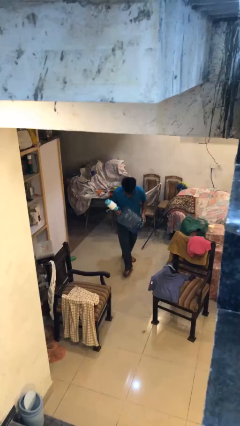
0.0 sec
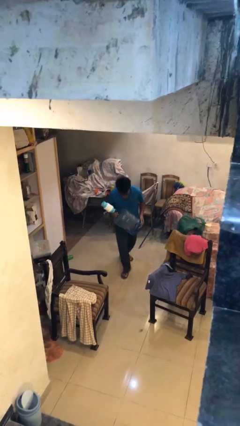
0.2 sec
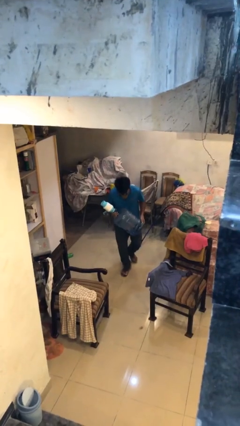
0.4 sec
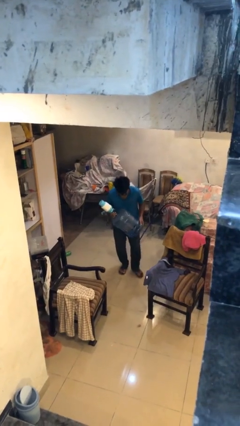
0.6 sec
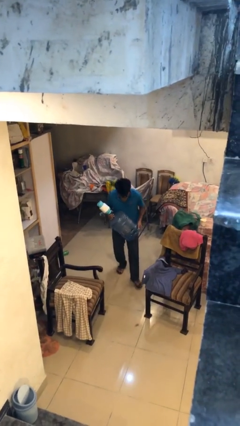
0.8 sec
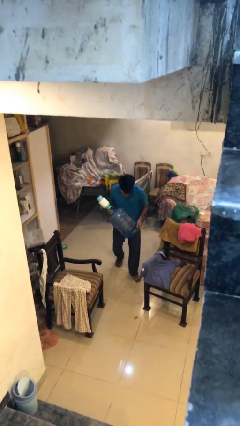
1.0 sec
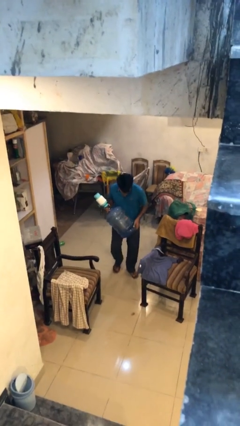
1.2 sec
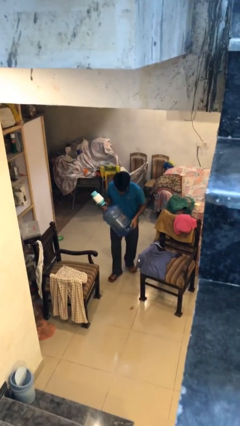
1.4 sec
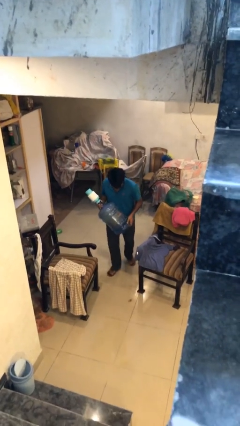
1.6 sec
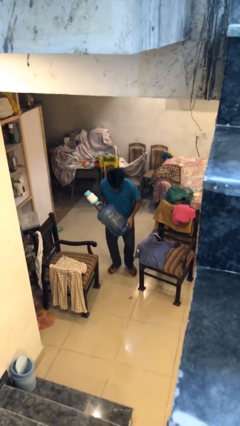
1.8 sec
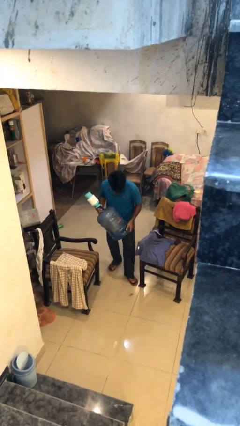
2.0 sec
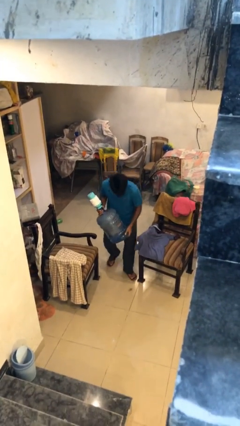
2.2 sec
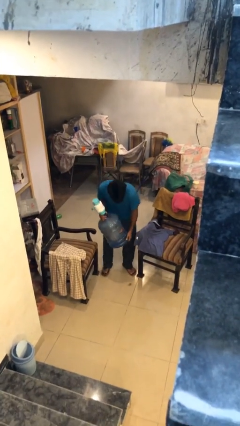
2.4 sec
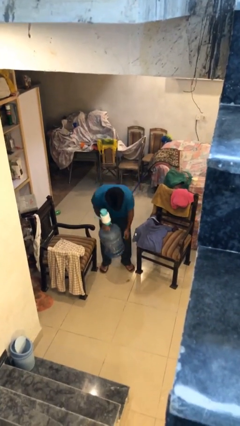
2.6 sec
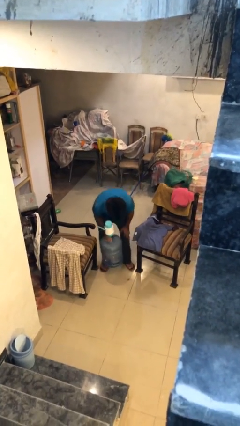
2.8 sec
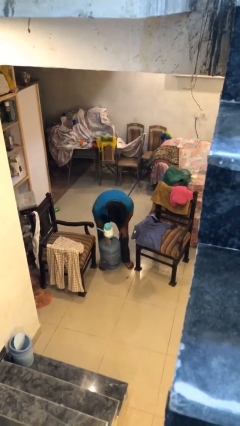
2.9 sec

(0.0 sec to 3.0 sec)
person carries heavy object

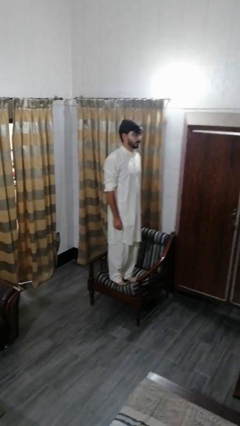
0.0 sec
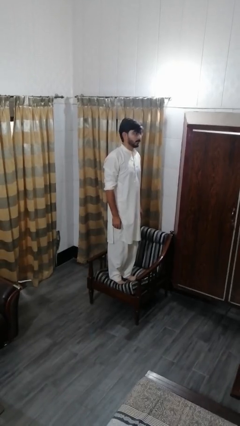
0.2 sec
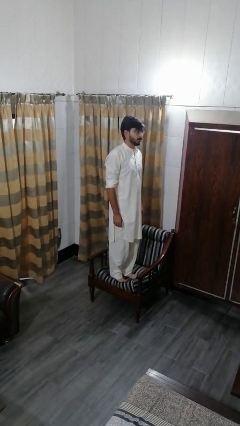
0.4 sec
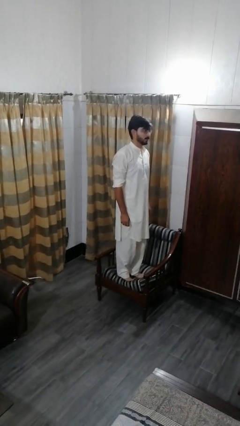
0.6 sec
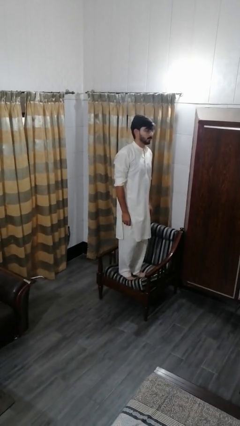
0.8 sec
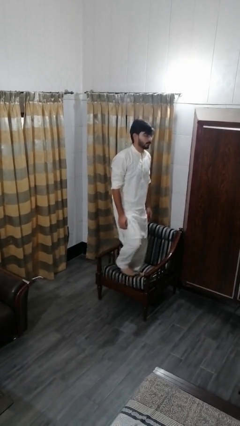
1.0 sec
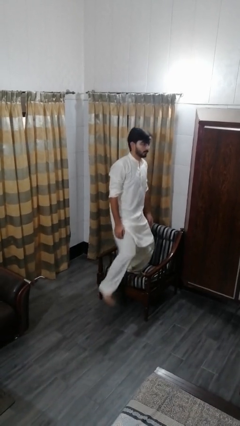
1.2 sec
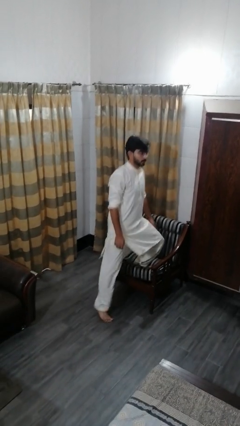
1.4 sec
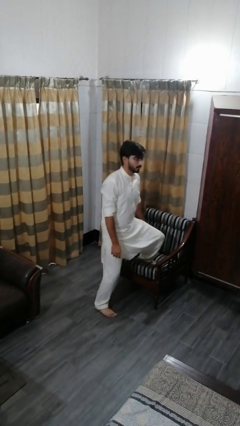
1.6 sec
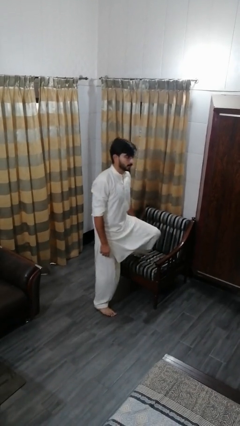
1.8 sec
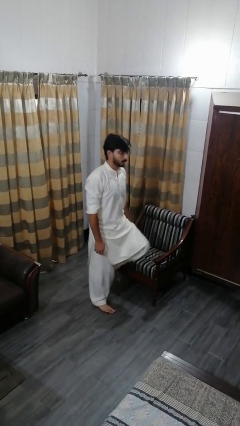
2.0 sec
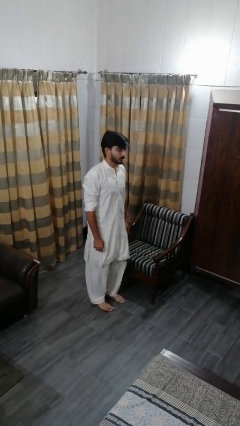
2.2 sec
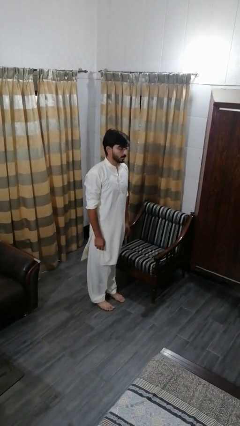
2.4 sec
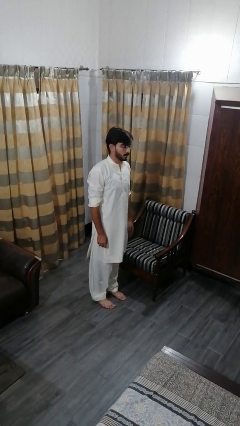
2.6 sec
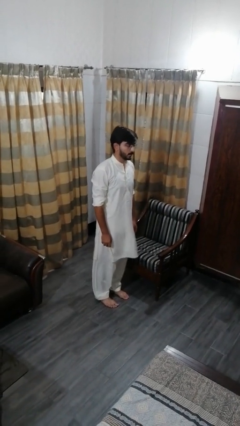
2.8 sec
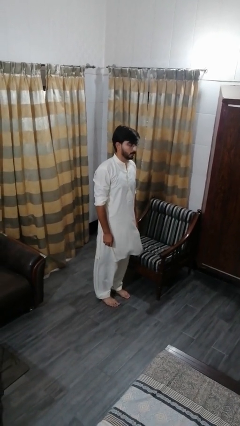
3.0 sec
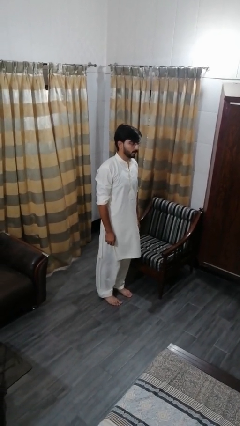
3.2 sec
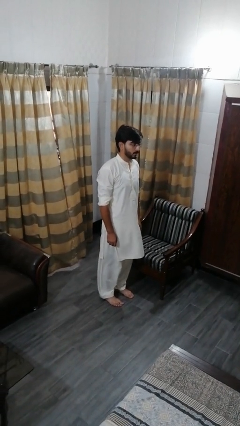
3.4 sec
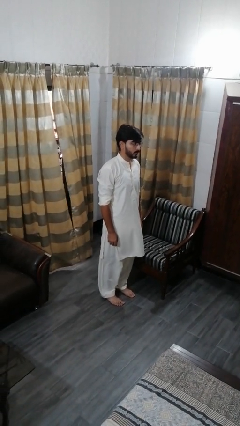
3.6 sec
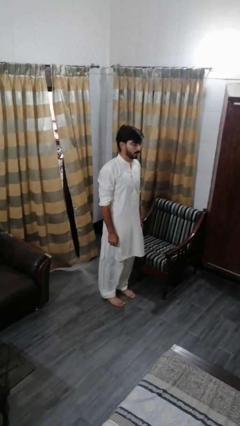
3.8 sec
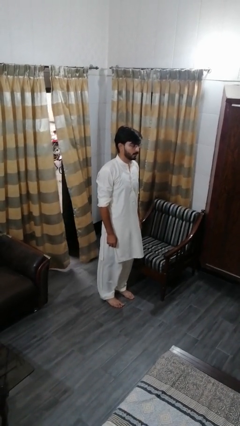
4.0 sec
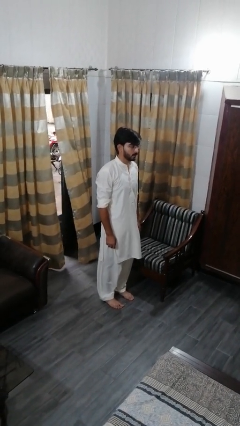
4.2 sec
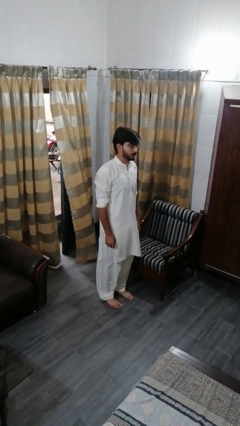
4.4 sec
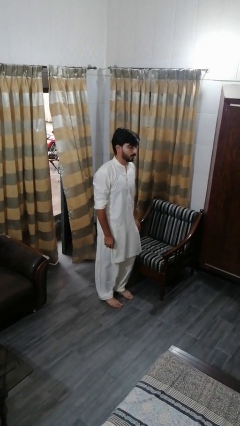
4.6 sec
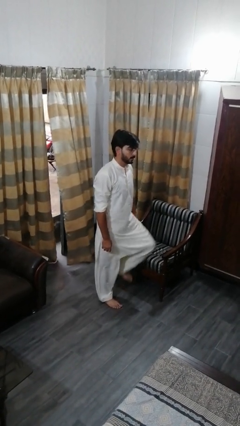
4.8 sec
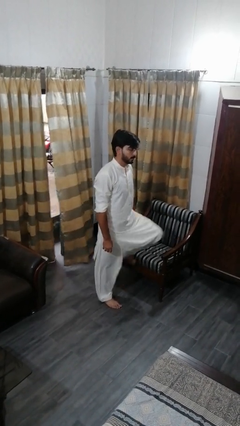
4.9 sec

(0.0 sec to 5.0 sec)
person climbs off chair

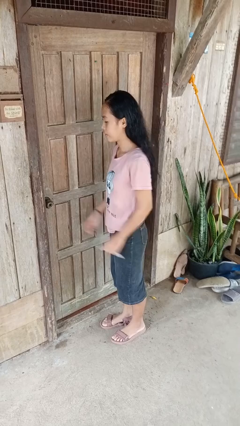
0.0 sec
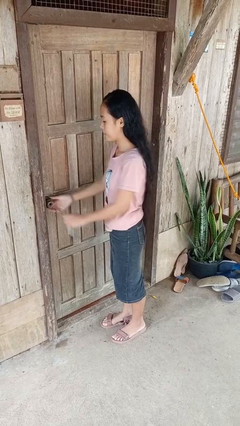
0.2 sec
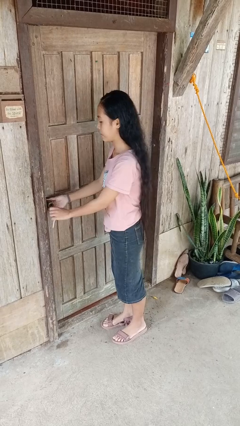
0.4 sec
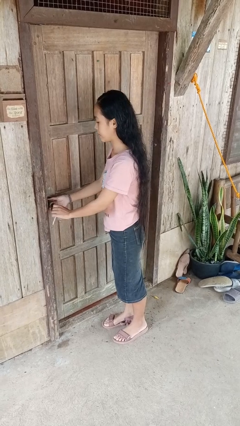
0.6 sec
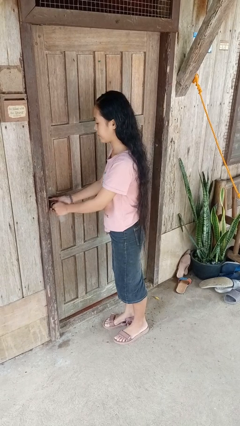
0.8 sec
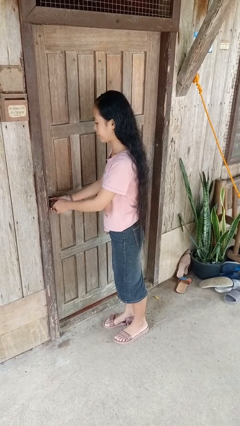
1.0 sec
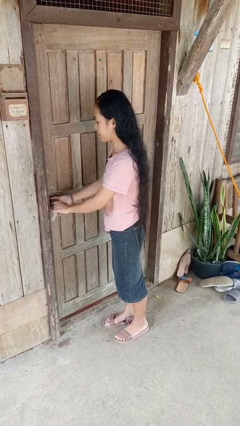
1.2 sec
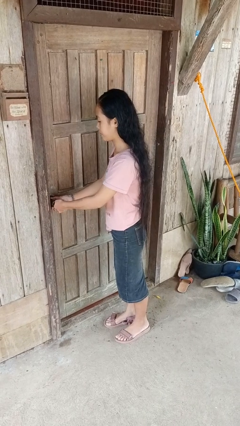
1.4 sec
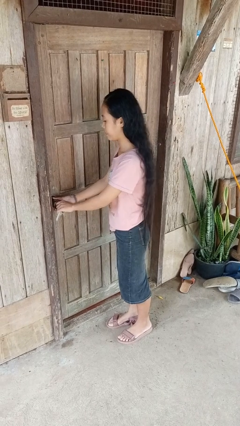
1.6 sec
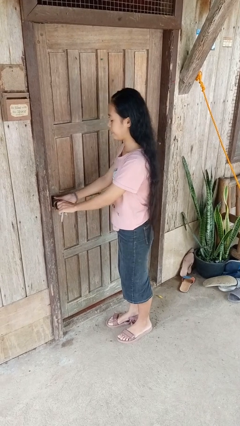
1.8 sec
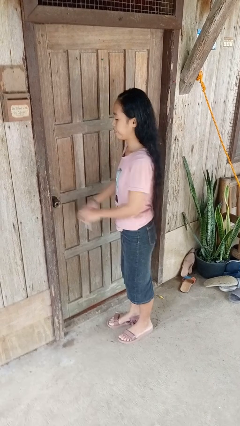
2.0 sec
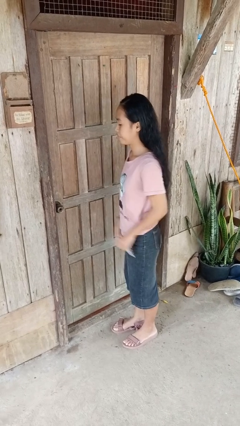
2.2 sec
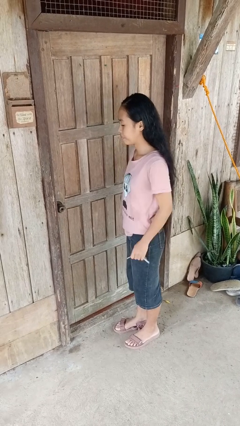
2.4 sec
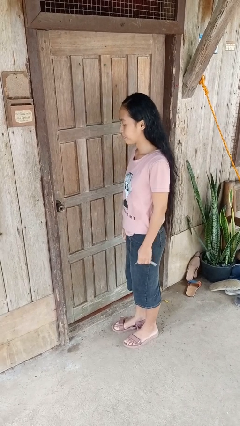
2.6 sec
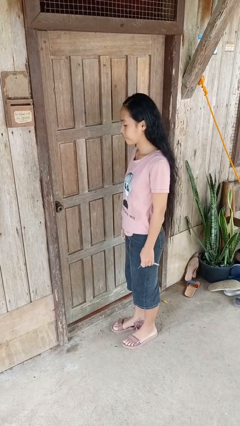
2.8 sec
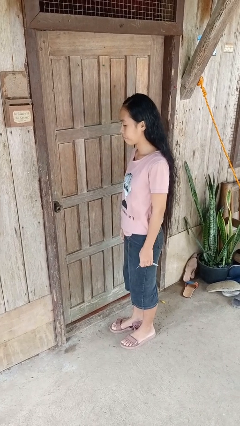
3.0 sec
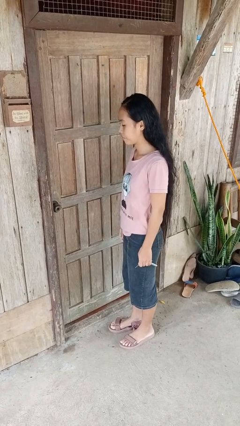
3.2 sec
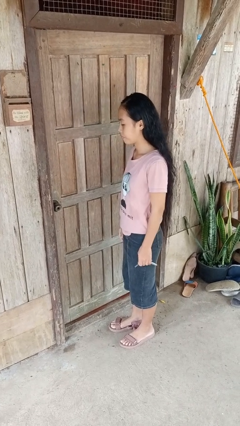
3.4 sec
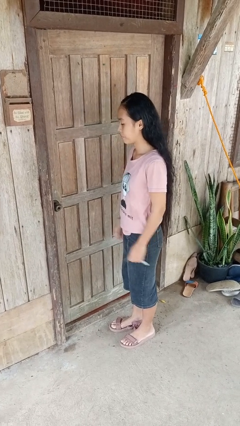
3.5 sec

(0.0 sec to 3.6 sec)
person locks door with keys

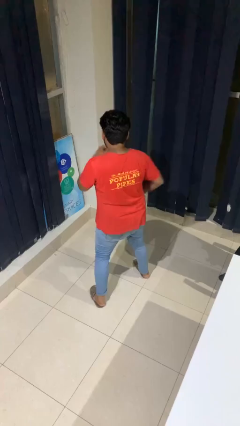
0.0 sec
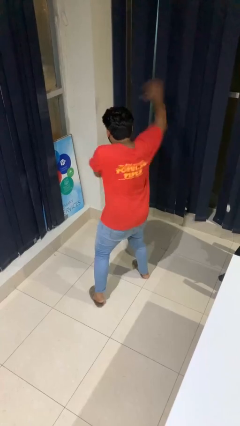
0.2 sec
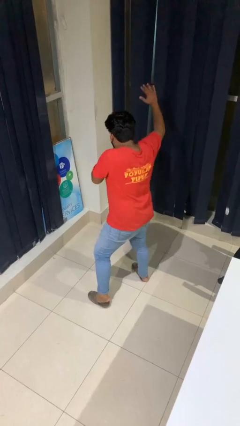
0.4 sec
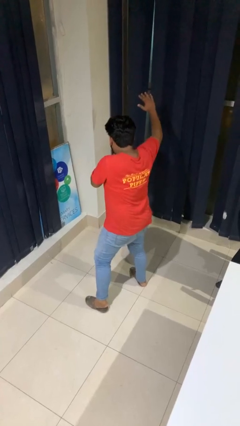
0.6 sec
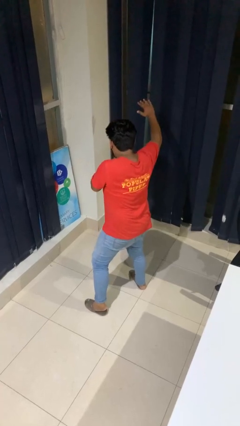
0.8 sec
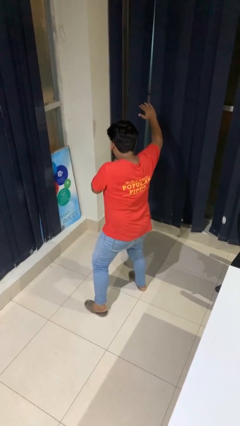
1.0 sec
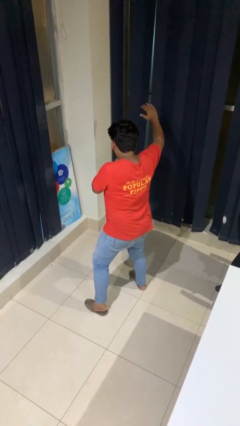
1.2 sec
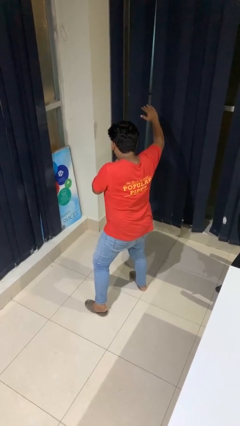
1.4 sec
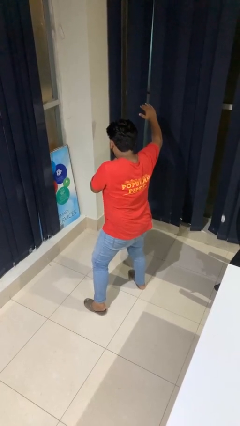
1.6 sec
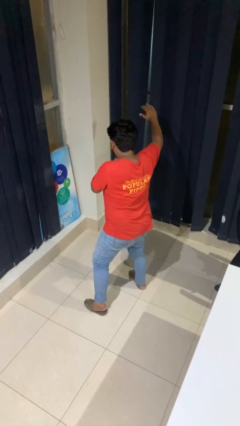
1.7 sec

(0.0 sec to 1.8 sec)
person karate chop

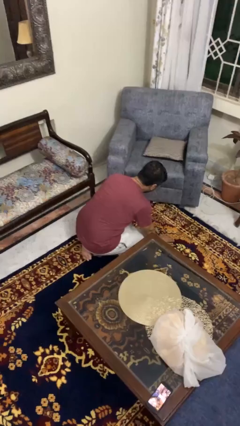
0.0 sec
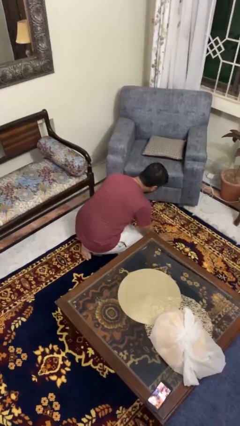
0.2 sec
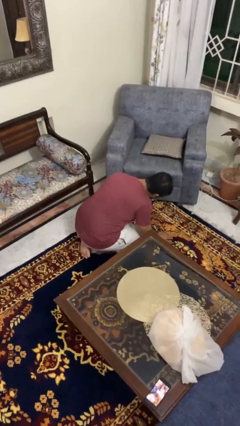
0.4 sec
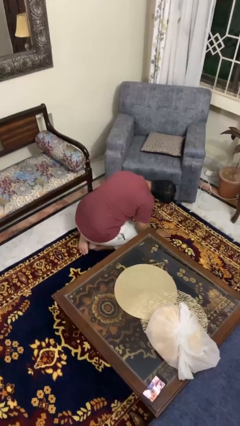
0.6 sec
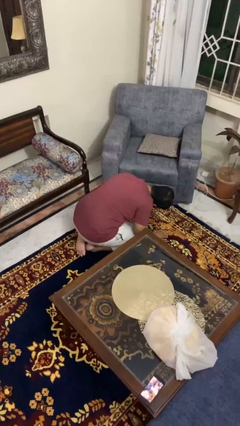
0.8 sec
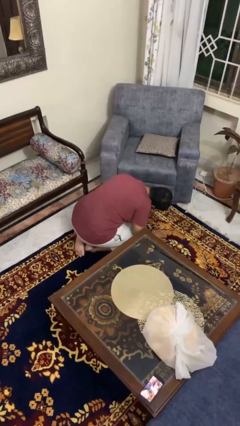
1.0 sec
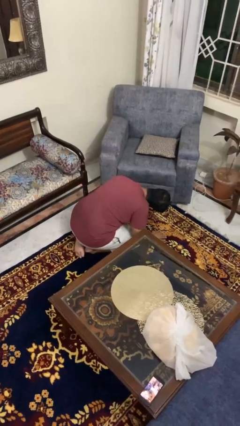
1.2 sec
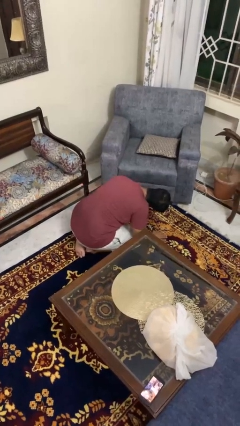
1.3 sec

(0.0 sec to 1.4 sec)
person searches under couch

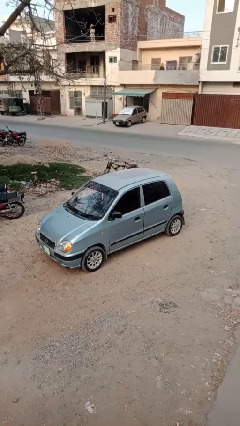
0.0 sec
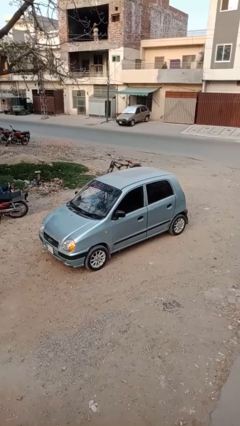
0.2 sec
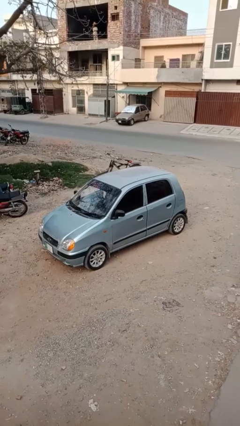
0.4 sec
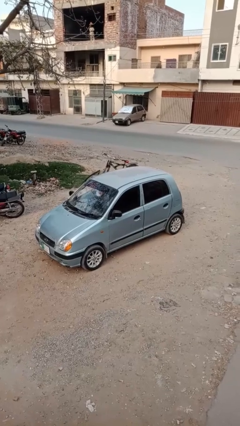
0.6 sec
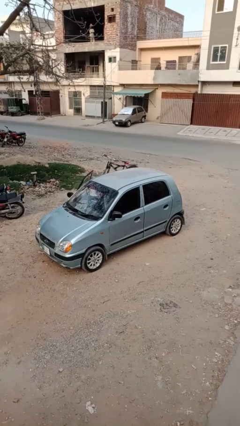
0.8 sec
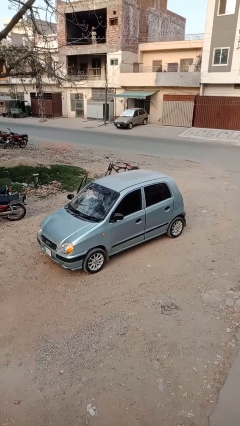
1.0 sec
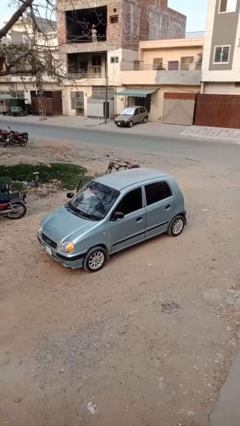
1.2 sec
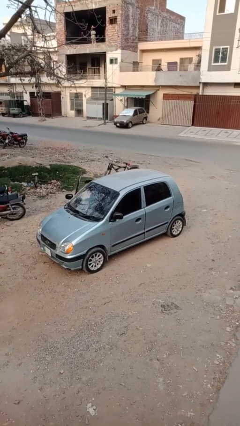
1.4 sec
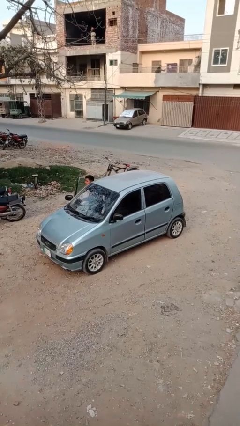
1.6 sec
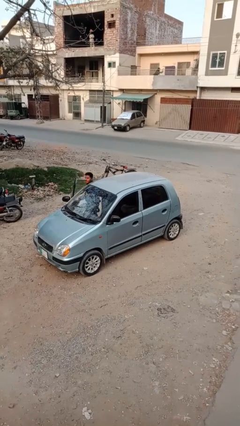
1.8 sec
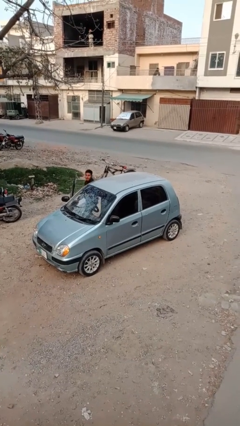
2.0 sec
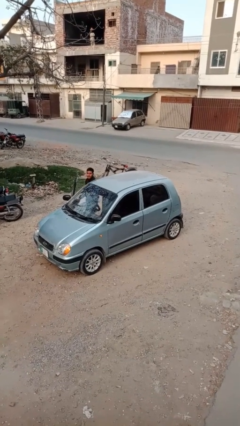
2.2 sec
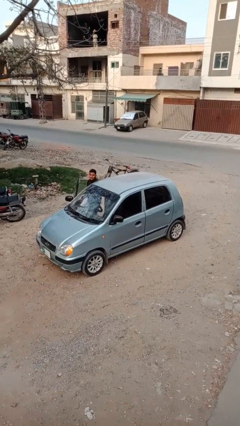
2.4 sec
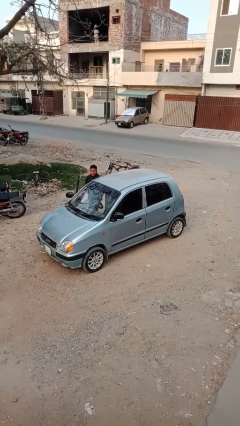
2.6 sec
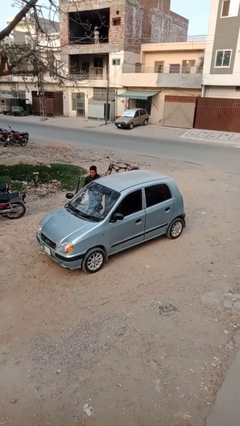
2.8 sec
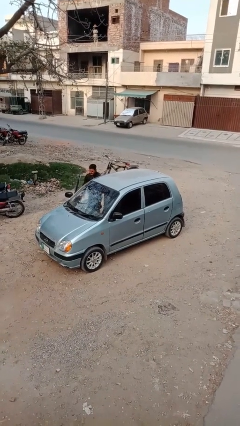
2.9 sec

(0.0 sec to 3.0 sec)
car drops off person
